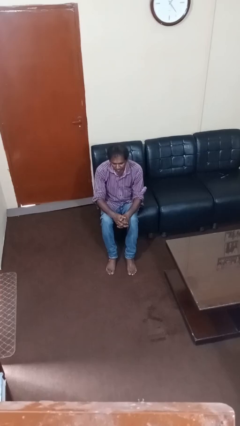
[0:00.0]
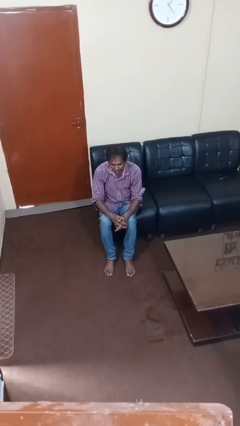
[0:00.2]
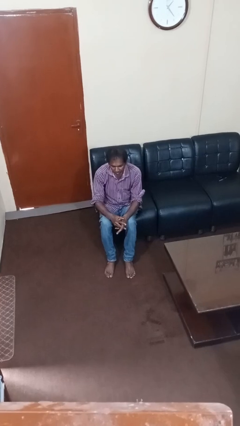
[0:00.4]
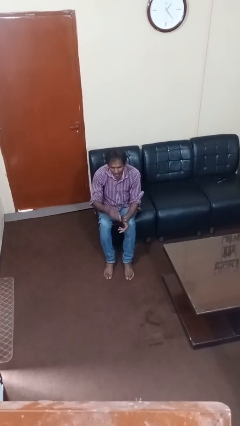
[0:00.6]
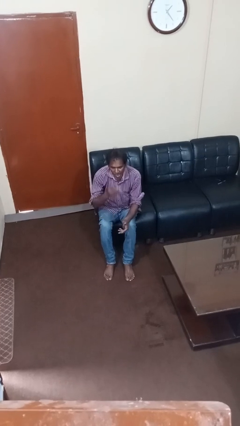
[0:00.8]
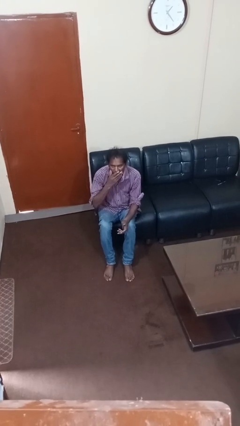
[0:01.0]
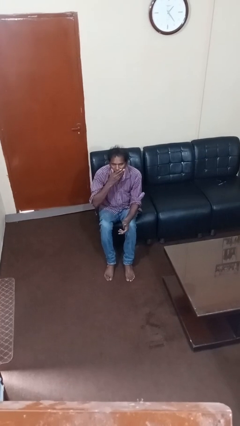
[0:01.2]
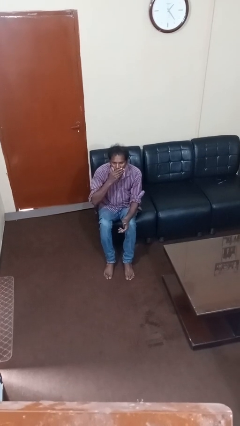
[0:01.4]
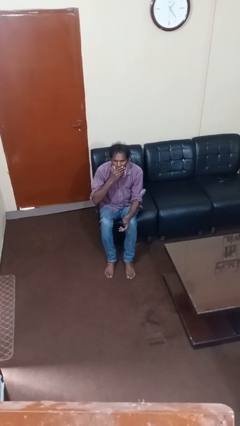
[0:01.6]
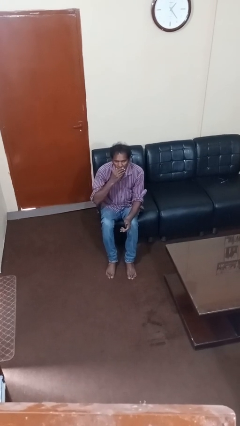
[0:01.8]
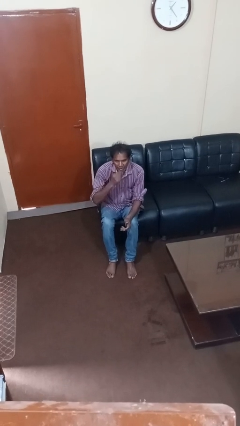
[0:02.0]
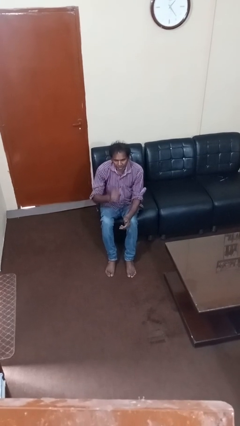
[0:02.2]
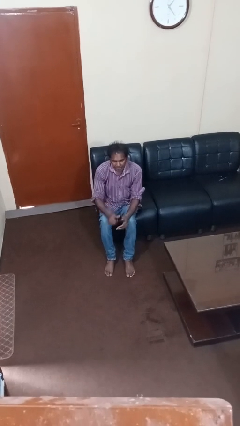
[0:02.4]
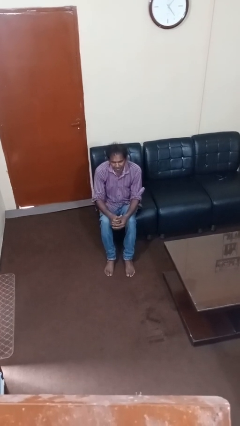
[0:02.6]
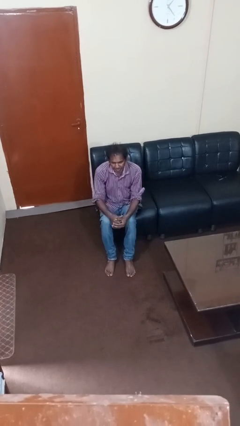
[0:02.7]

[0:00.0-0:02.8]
person yawns

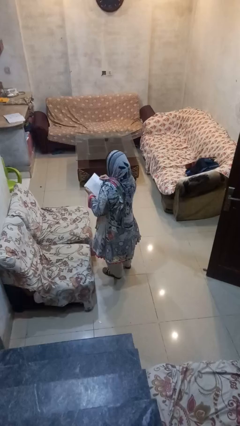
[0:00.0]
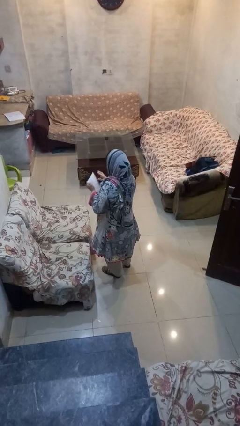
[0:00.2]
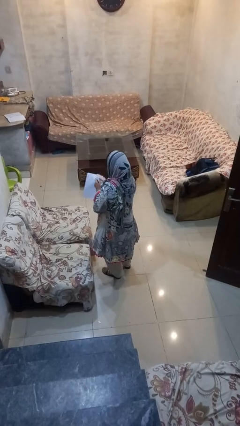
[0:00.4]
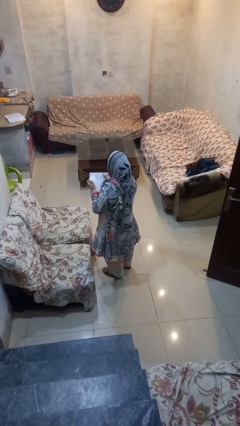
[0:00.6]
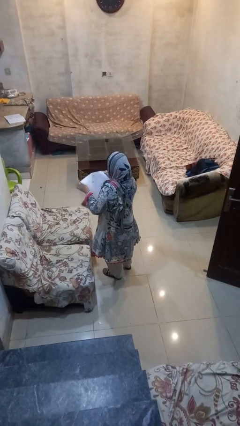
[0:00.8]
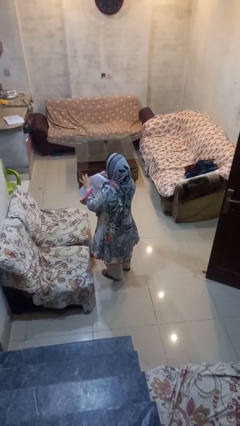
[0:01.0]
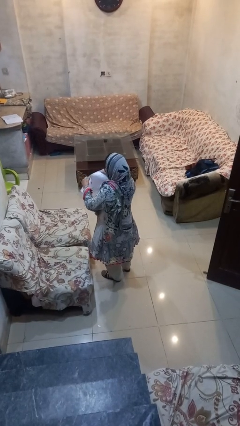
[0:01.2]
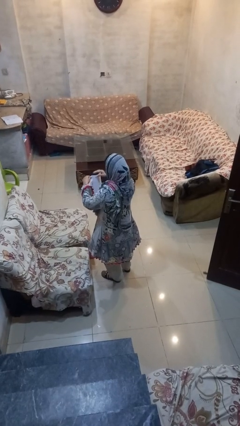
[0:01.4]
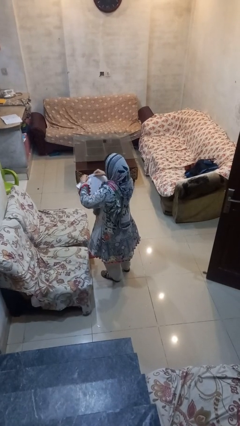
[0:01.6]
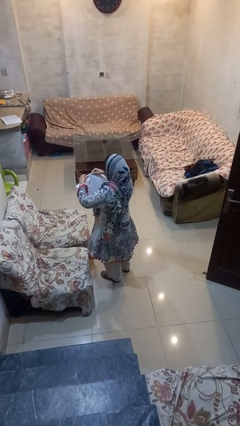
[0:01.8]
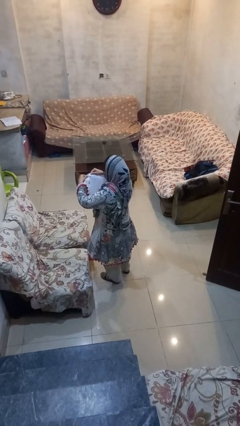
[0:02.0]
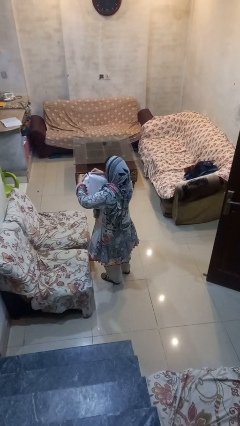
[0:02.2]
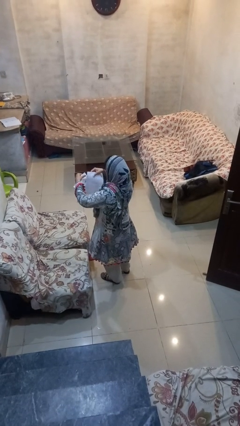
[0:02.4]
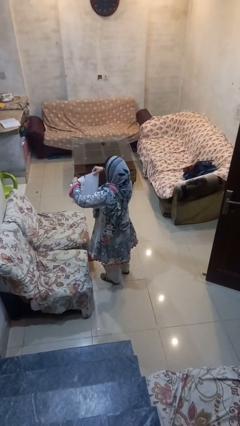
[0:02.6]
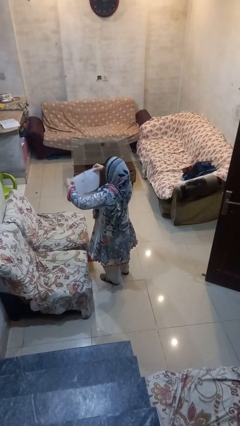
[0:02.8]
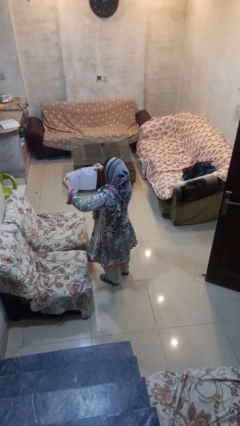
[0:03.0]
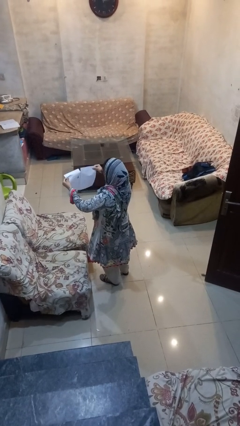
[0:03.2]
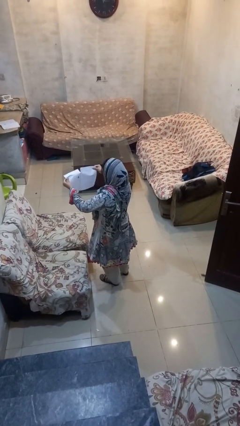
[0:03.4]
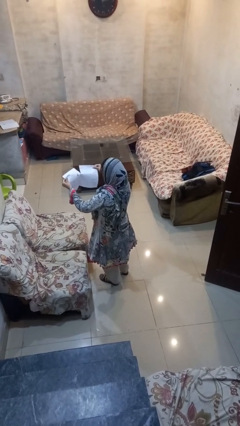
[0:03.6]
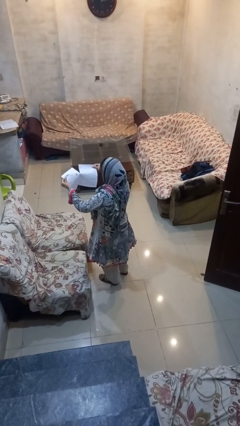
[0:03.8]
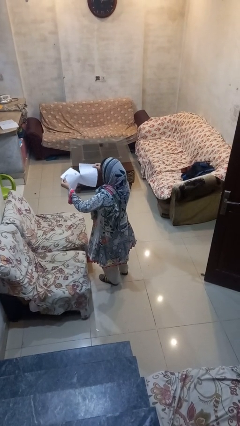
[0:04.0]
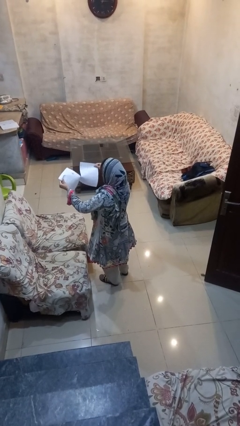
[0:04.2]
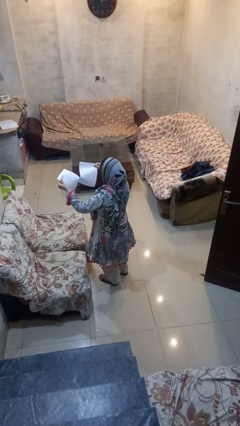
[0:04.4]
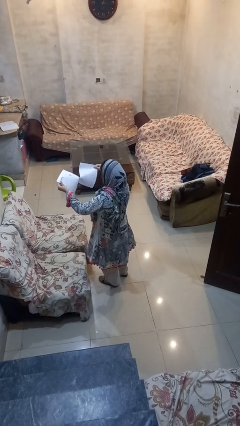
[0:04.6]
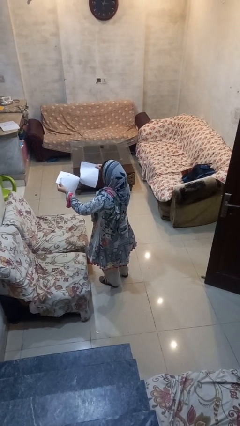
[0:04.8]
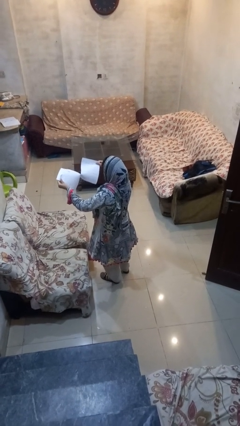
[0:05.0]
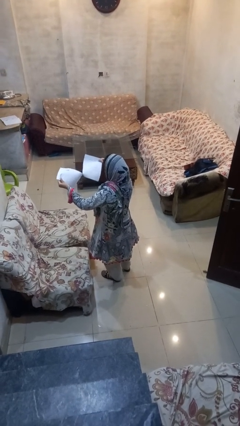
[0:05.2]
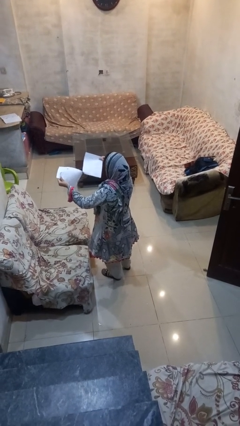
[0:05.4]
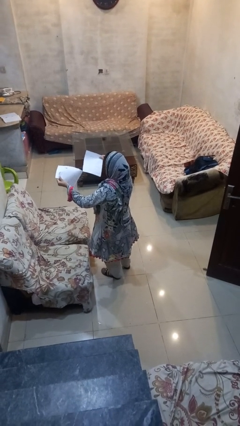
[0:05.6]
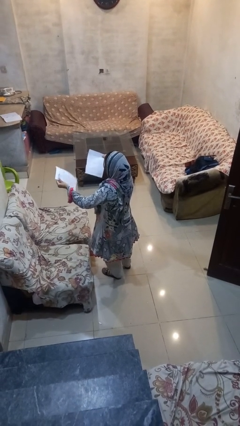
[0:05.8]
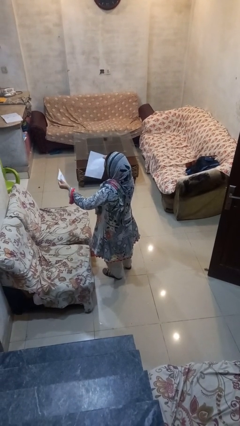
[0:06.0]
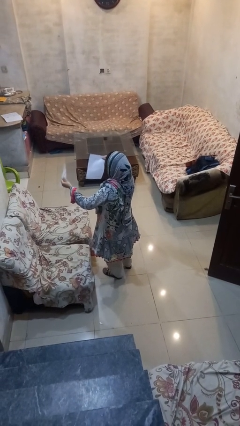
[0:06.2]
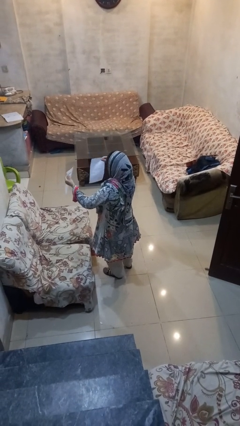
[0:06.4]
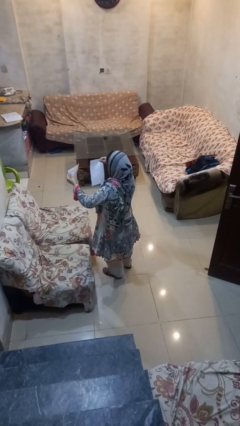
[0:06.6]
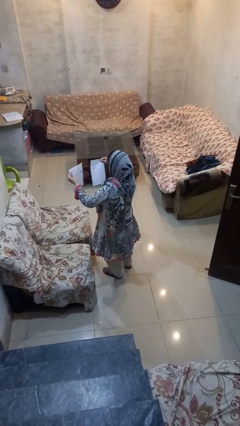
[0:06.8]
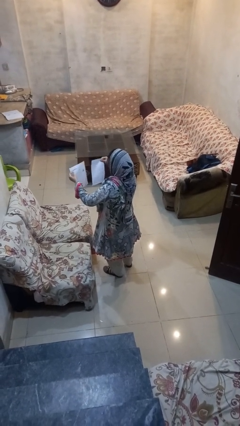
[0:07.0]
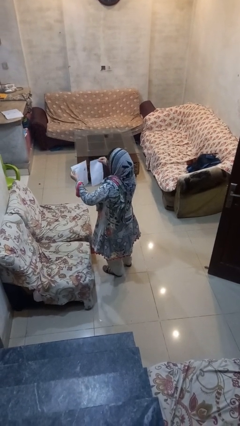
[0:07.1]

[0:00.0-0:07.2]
person tears paper

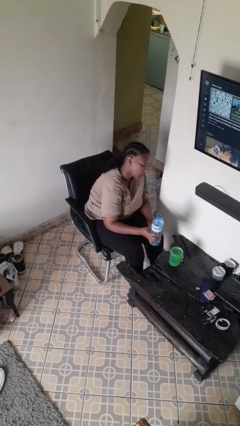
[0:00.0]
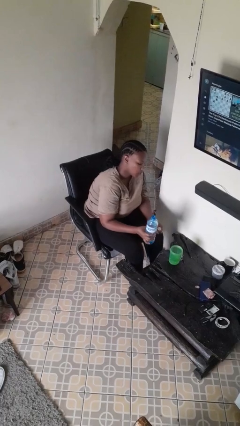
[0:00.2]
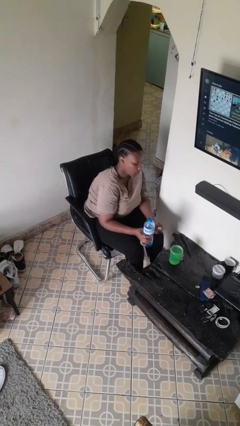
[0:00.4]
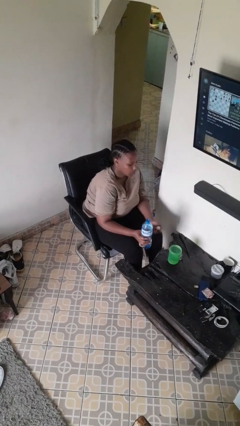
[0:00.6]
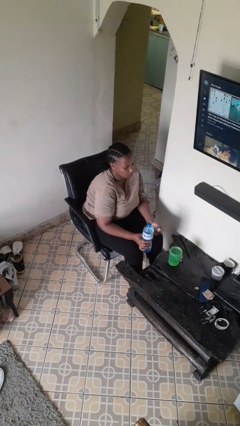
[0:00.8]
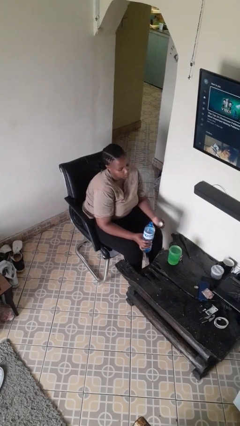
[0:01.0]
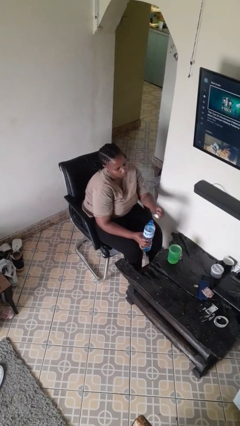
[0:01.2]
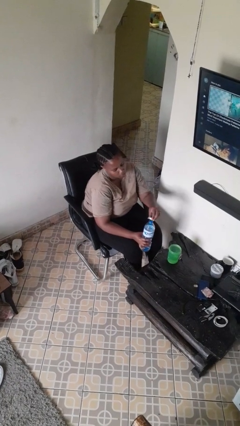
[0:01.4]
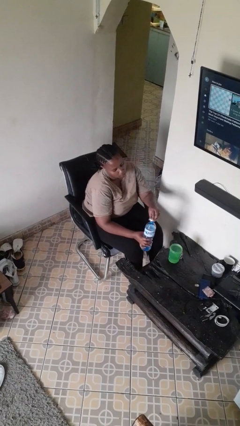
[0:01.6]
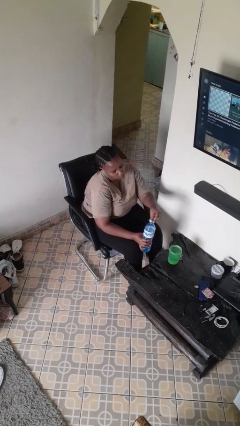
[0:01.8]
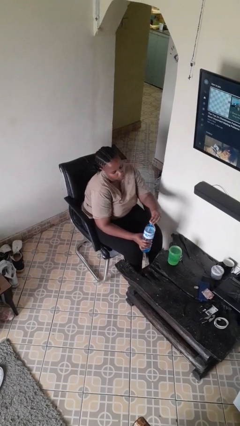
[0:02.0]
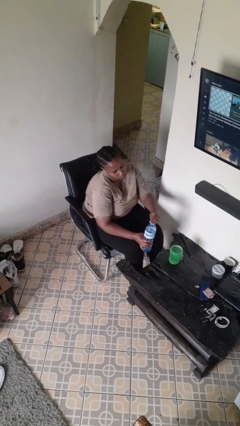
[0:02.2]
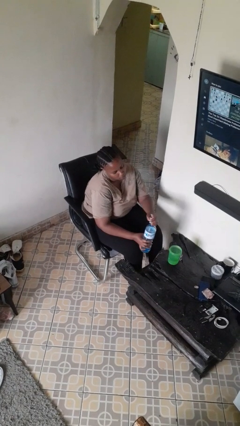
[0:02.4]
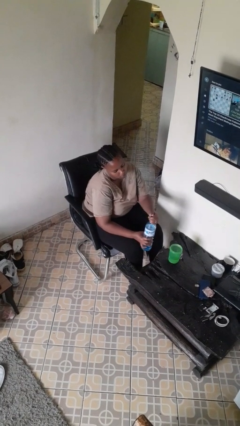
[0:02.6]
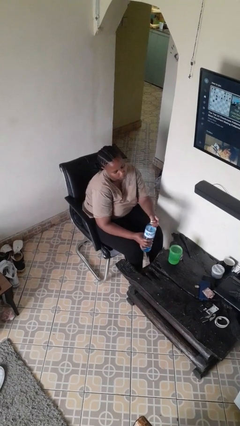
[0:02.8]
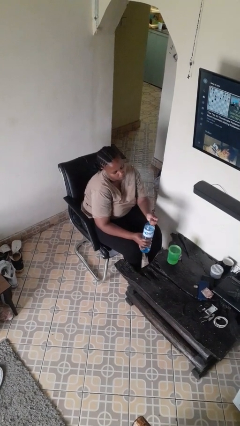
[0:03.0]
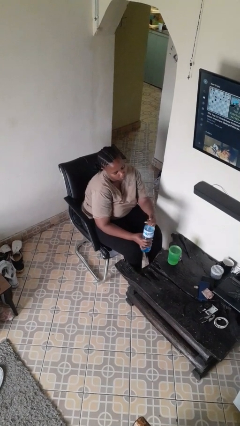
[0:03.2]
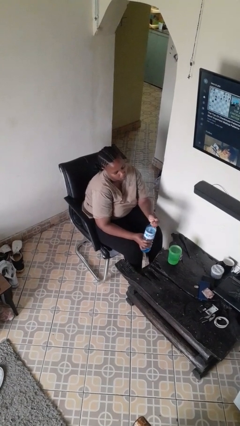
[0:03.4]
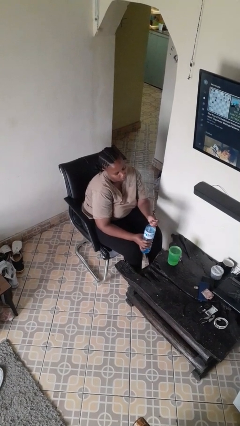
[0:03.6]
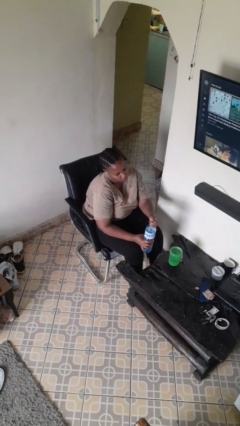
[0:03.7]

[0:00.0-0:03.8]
person screws lid to bottle

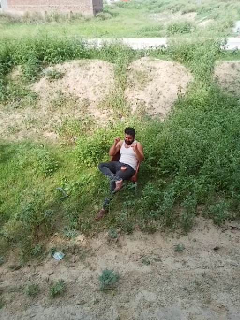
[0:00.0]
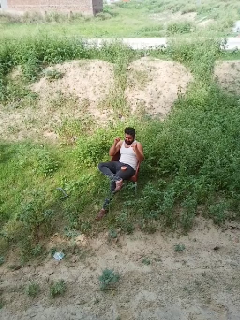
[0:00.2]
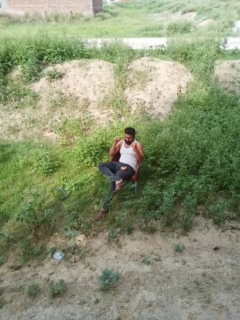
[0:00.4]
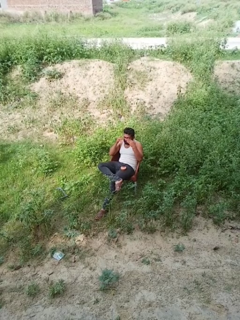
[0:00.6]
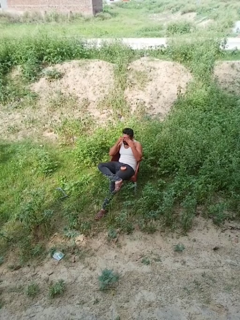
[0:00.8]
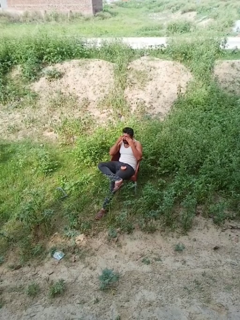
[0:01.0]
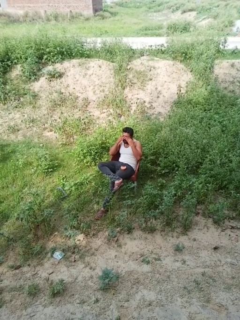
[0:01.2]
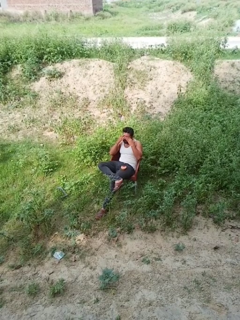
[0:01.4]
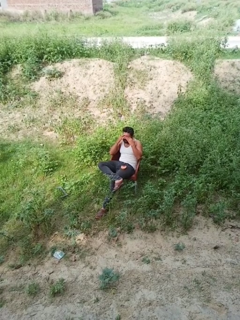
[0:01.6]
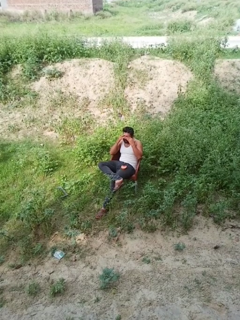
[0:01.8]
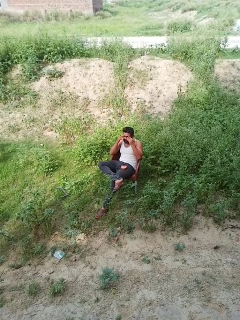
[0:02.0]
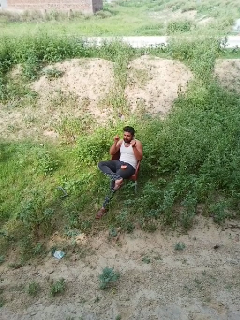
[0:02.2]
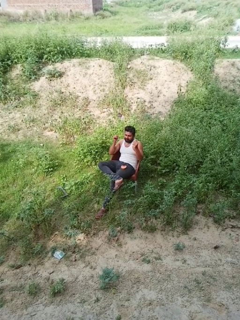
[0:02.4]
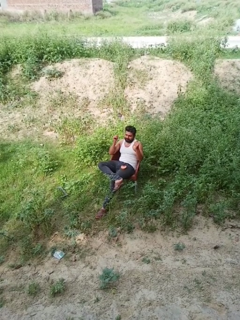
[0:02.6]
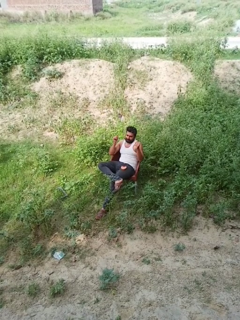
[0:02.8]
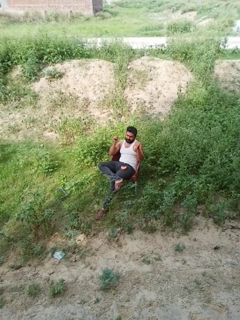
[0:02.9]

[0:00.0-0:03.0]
person rubs eyes

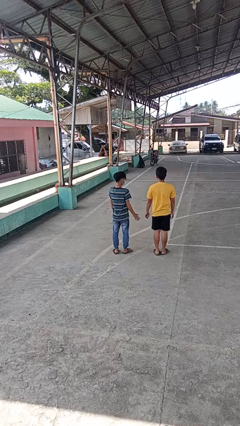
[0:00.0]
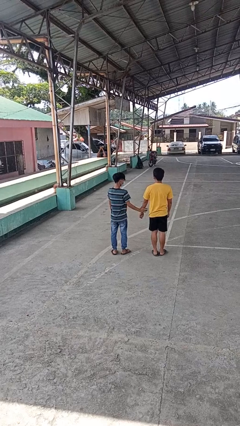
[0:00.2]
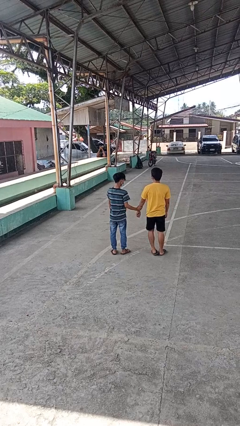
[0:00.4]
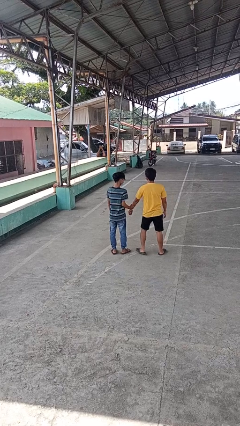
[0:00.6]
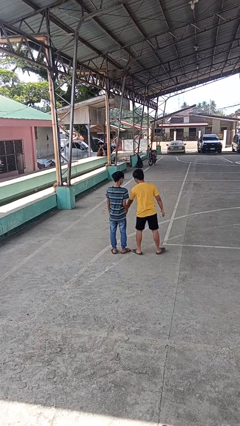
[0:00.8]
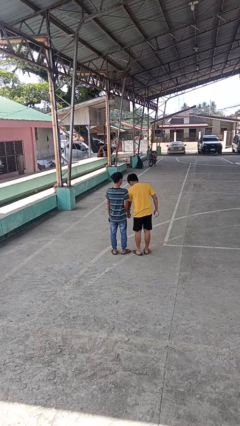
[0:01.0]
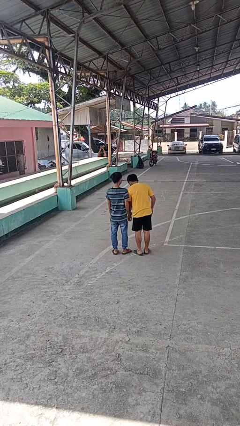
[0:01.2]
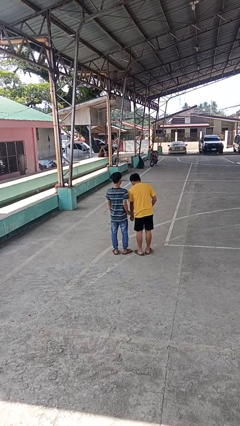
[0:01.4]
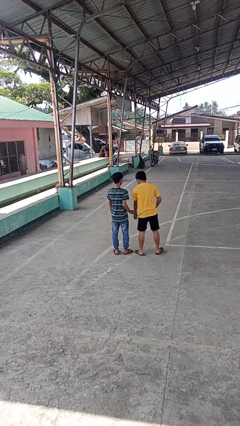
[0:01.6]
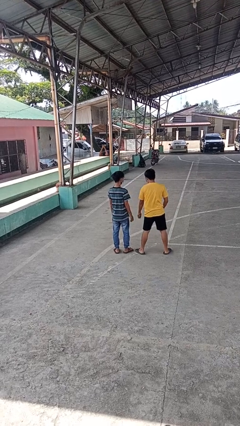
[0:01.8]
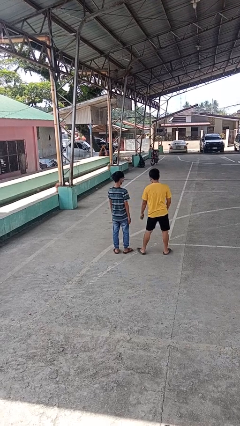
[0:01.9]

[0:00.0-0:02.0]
person grabs person by forearm
